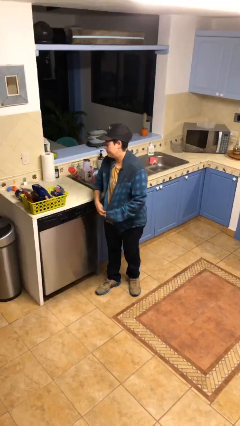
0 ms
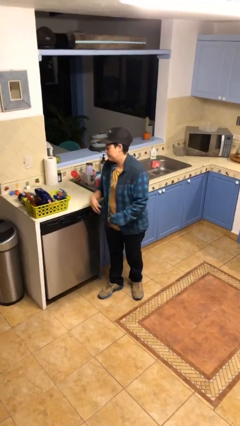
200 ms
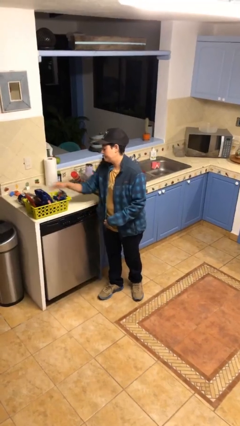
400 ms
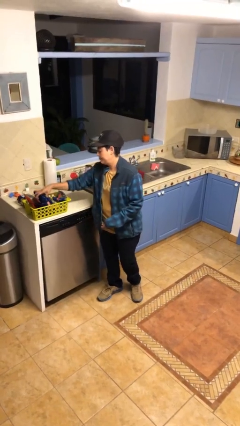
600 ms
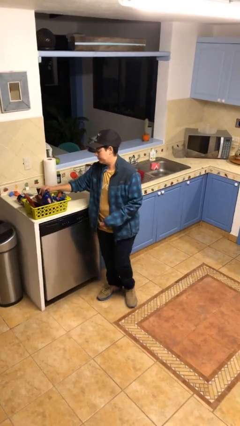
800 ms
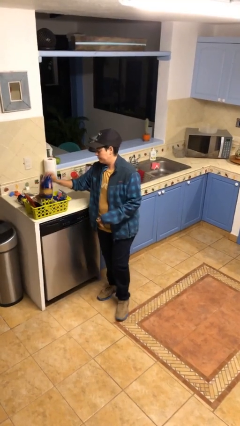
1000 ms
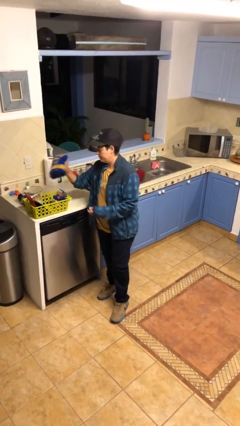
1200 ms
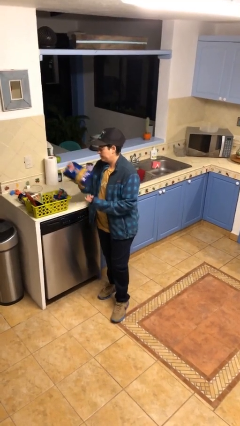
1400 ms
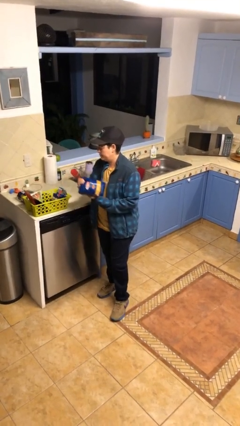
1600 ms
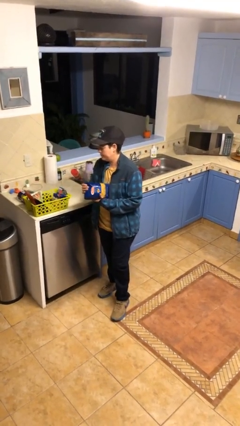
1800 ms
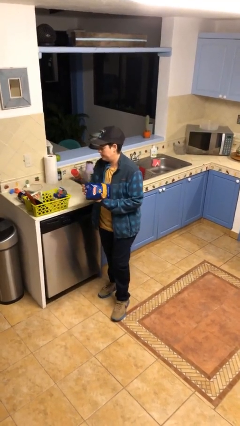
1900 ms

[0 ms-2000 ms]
person takes object from basket

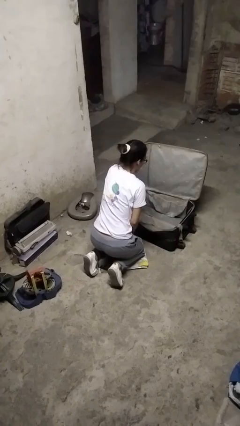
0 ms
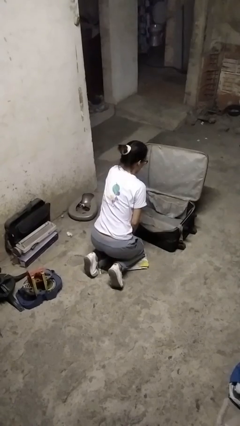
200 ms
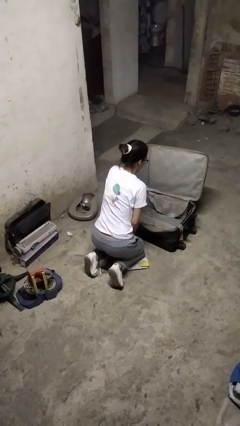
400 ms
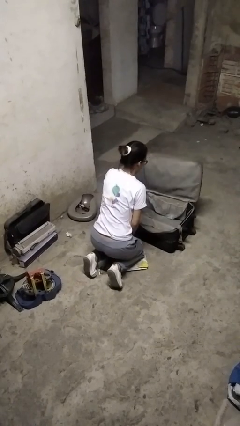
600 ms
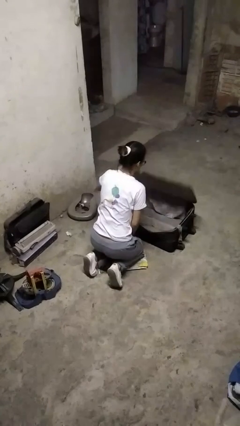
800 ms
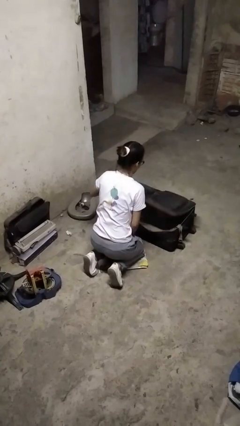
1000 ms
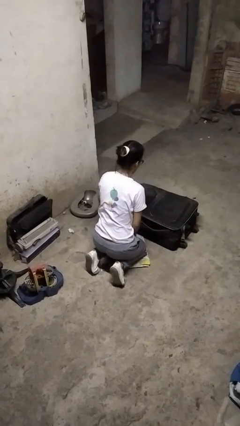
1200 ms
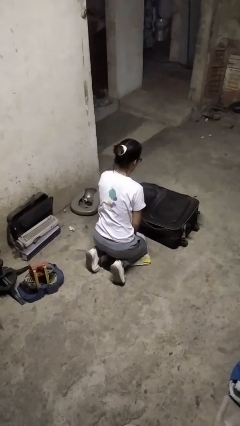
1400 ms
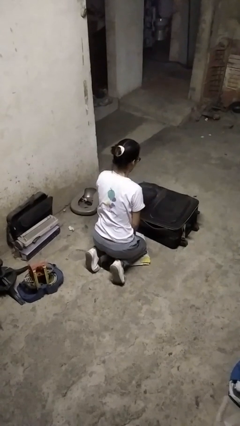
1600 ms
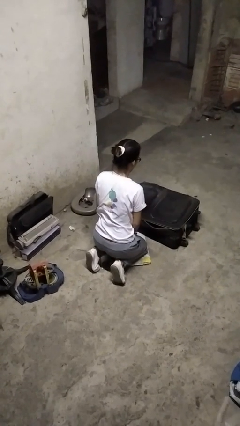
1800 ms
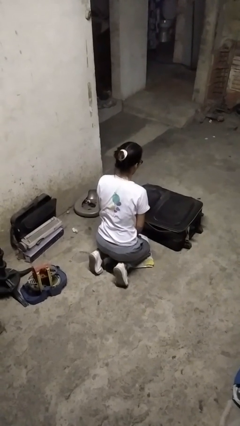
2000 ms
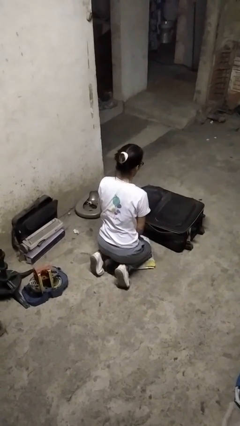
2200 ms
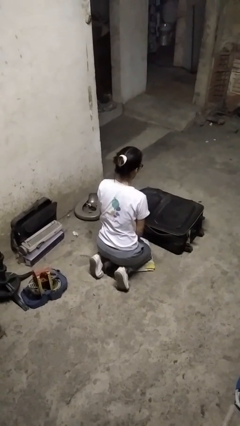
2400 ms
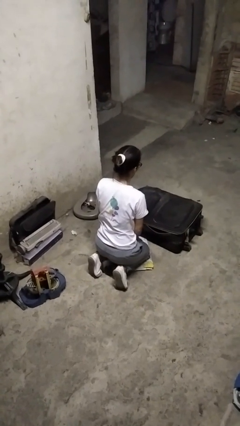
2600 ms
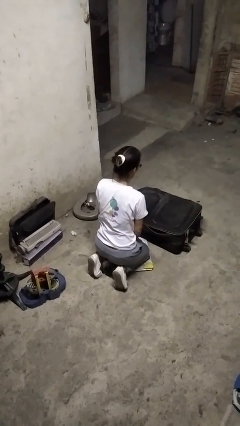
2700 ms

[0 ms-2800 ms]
person closes suitcase

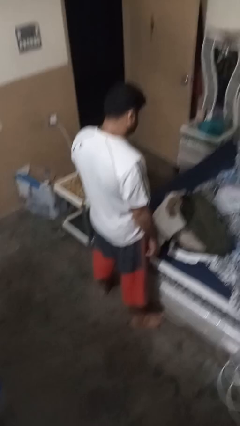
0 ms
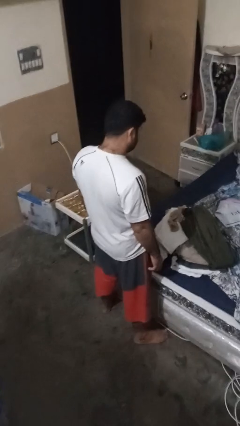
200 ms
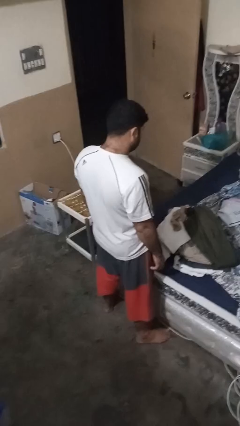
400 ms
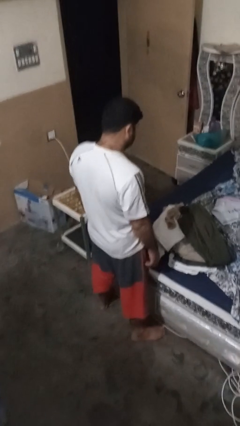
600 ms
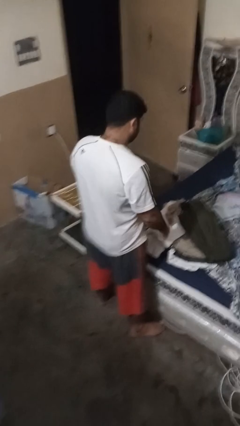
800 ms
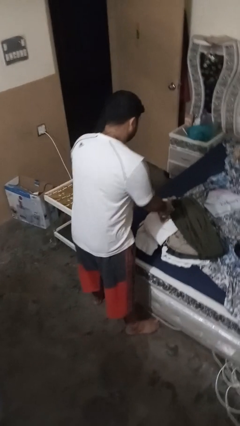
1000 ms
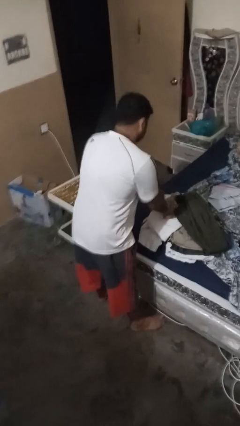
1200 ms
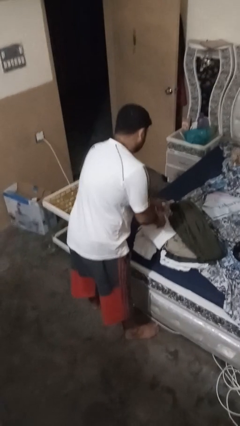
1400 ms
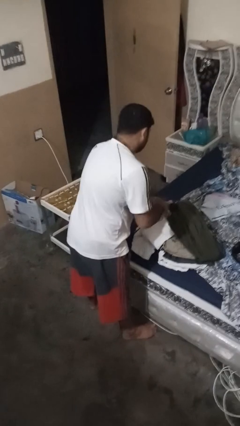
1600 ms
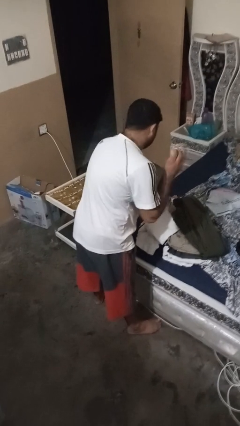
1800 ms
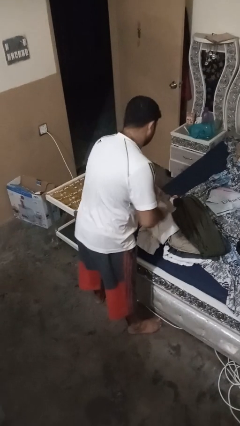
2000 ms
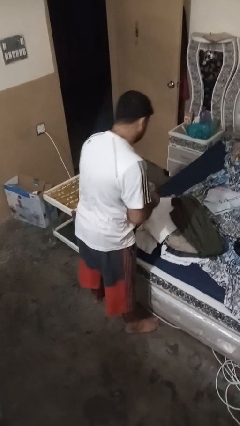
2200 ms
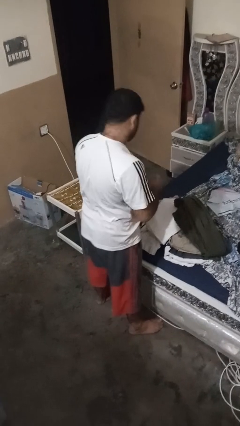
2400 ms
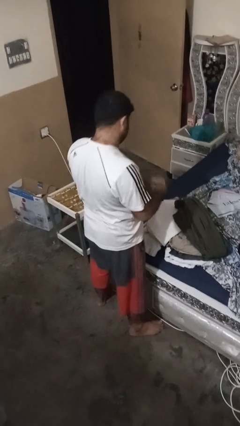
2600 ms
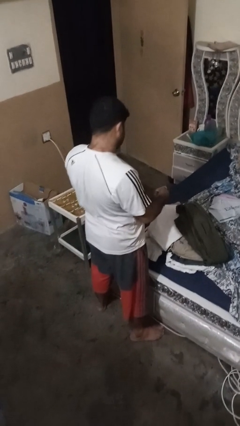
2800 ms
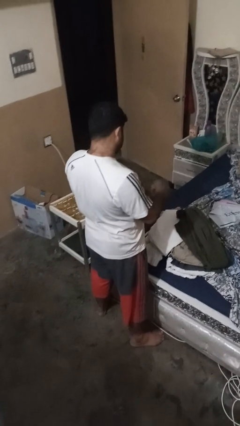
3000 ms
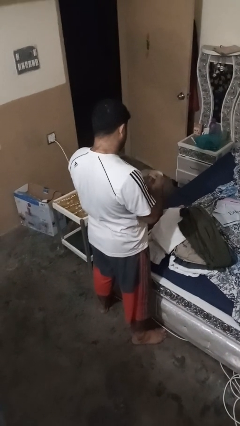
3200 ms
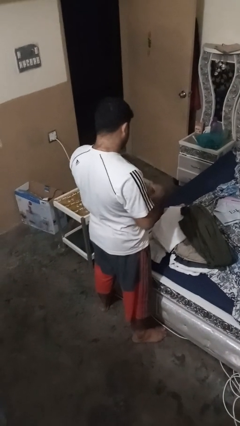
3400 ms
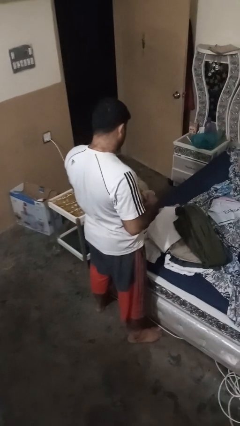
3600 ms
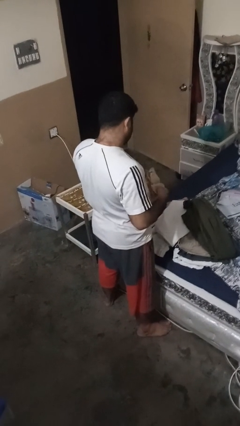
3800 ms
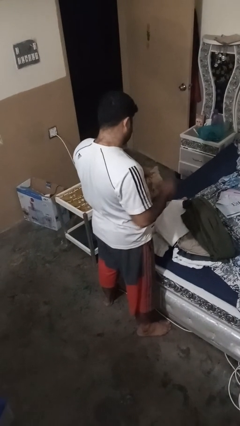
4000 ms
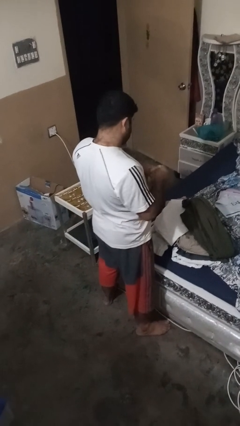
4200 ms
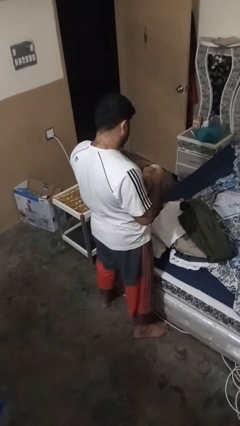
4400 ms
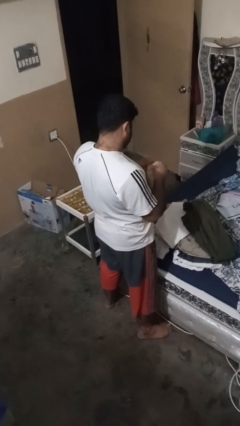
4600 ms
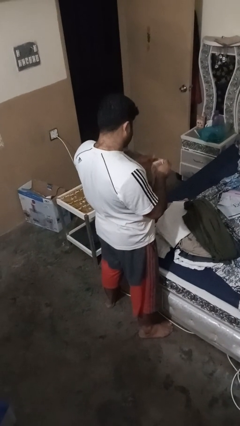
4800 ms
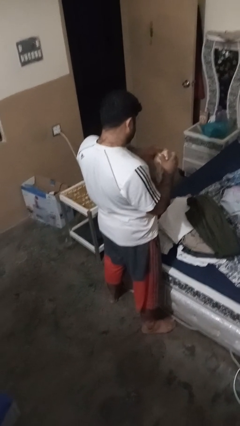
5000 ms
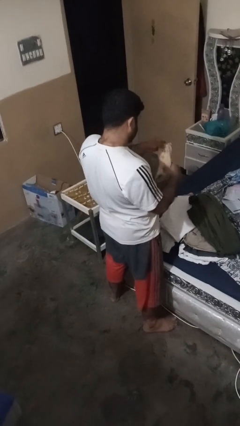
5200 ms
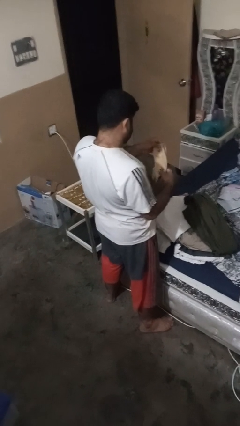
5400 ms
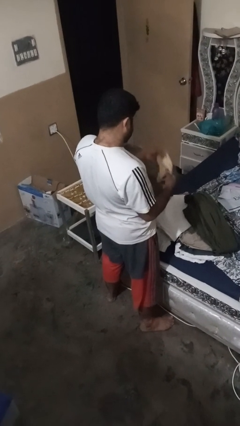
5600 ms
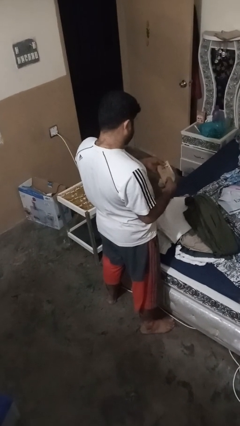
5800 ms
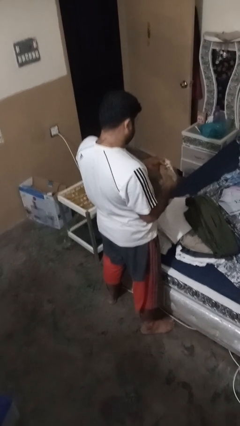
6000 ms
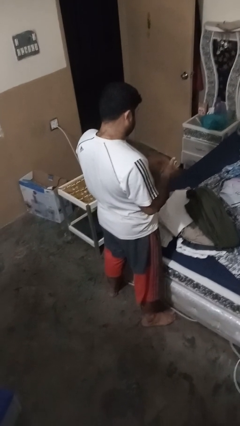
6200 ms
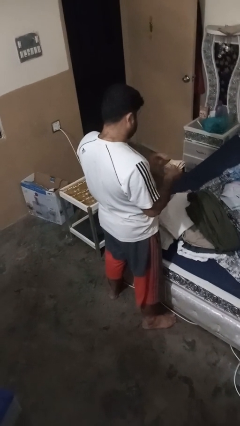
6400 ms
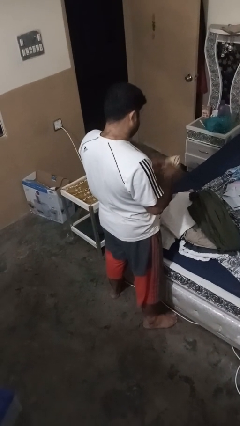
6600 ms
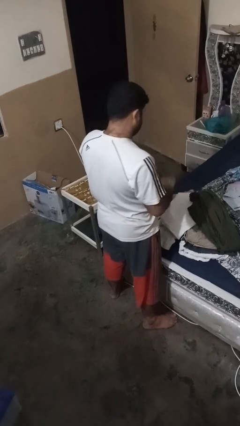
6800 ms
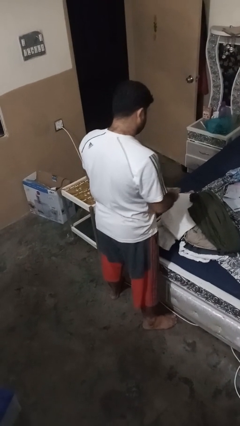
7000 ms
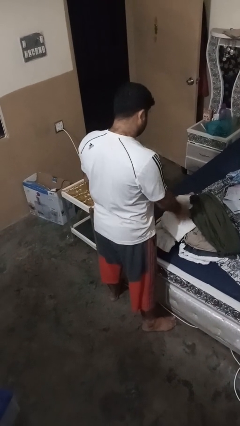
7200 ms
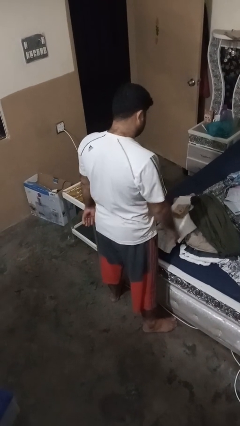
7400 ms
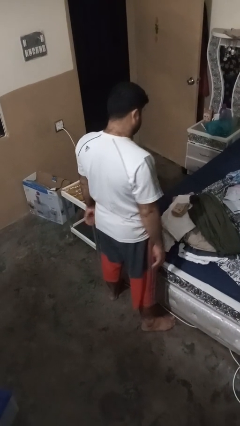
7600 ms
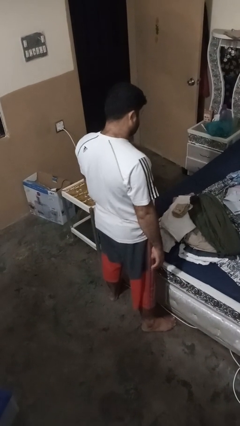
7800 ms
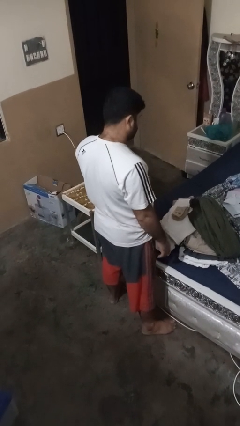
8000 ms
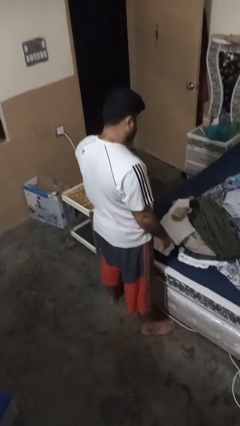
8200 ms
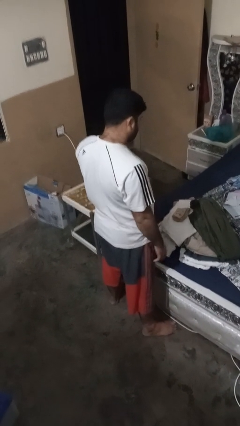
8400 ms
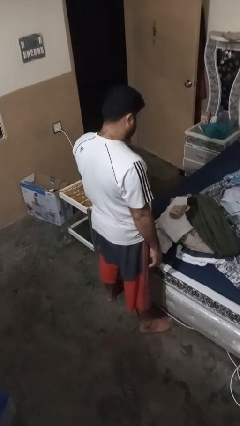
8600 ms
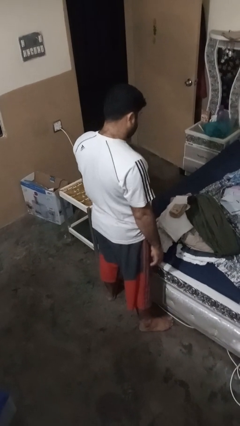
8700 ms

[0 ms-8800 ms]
person folds socks

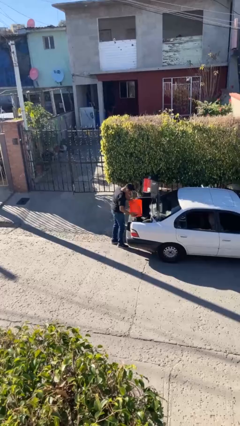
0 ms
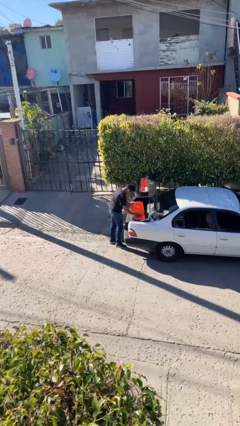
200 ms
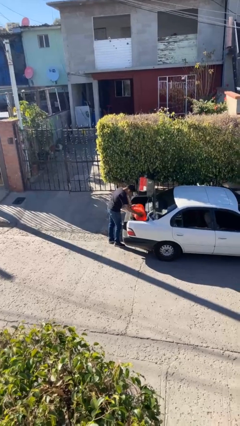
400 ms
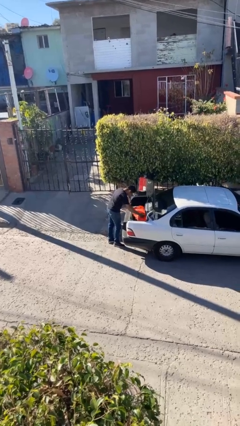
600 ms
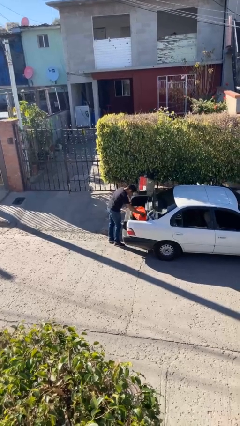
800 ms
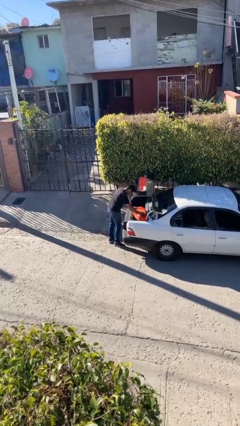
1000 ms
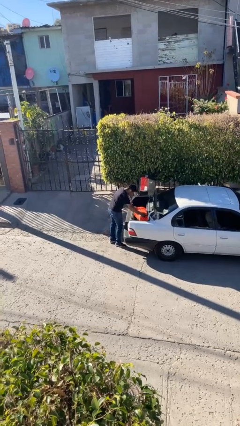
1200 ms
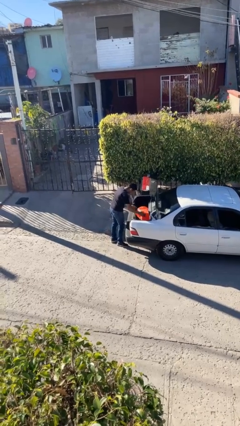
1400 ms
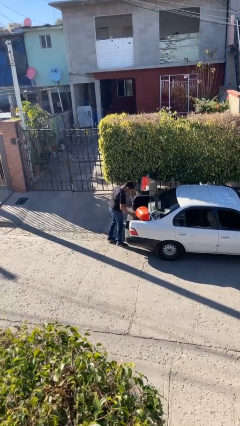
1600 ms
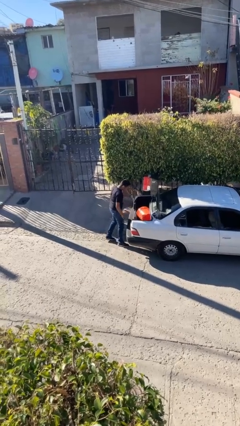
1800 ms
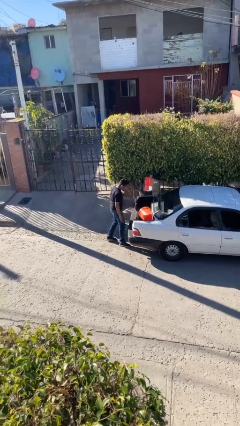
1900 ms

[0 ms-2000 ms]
person loads car

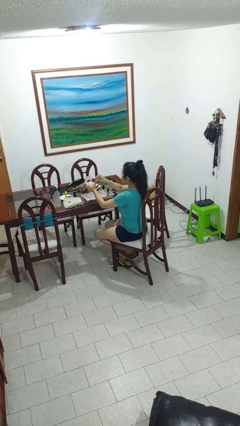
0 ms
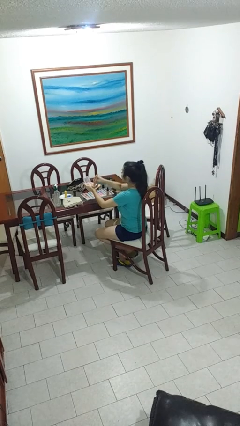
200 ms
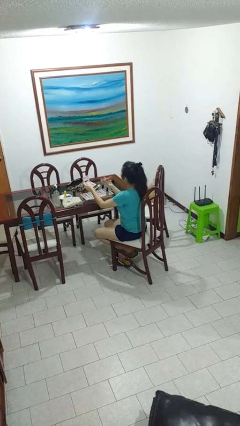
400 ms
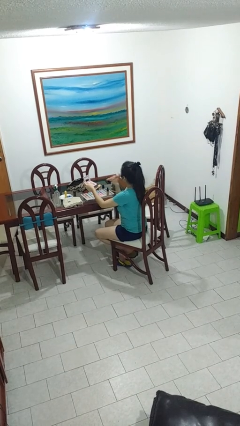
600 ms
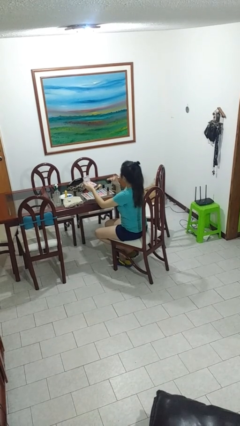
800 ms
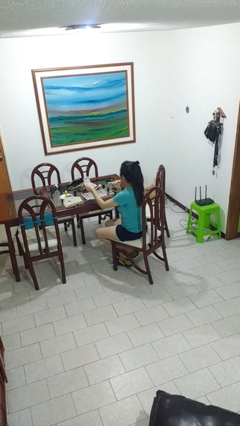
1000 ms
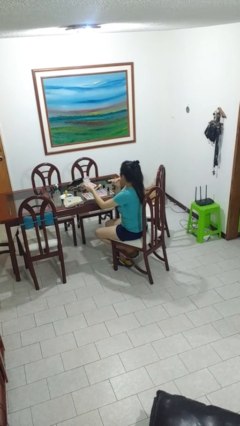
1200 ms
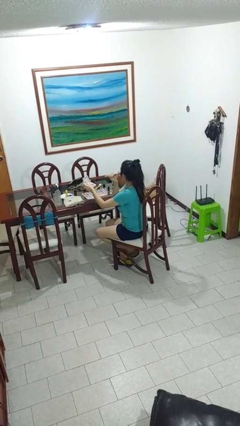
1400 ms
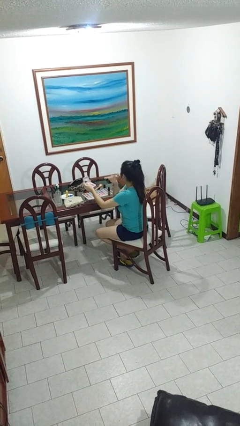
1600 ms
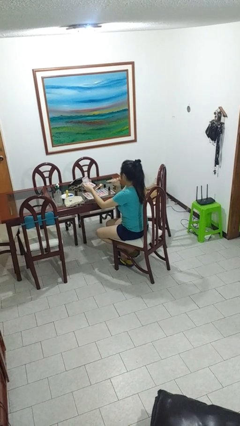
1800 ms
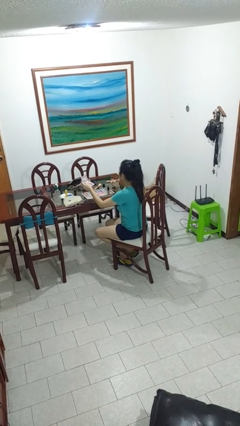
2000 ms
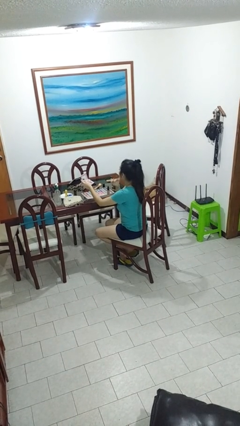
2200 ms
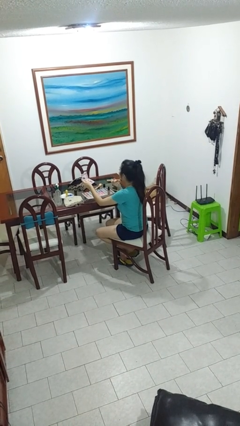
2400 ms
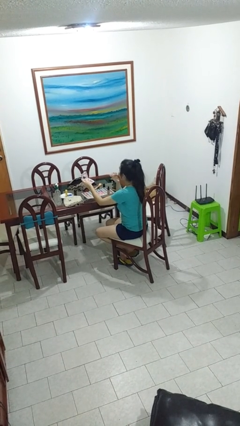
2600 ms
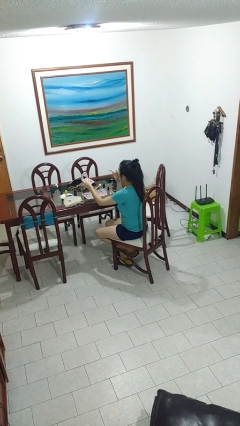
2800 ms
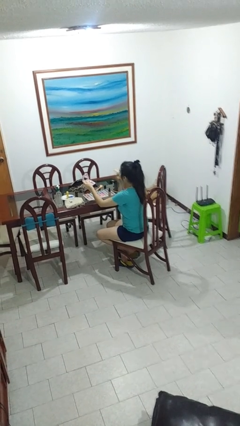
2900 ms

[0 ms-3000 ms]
person applies foundation makeup
